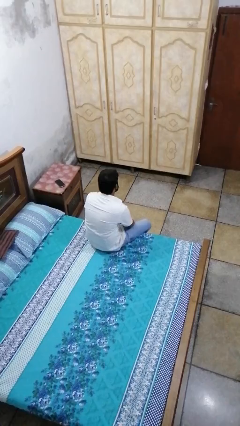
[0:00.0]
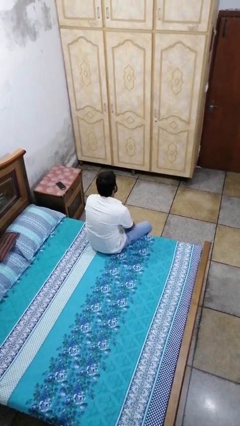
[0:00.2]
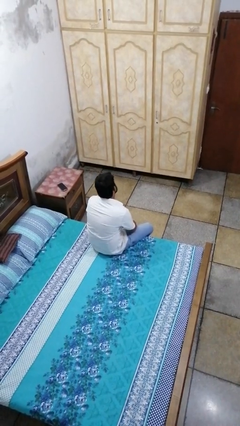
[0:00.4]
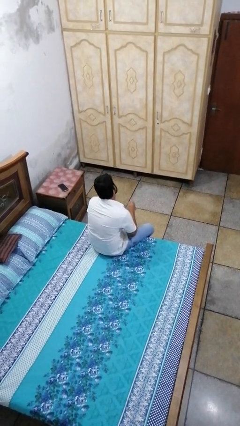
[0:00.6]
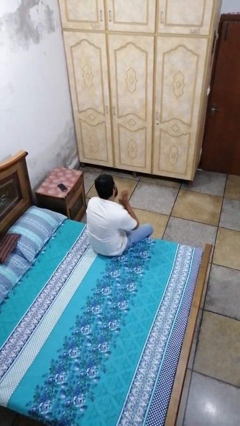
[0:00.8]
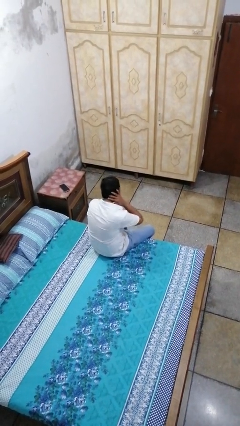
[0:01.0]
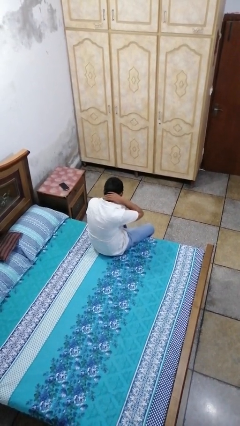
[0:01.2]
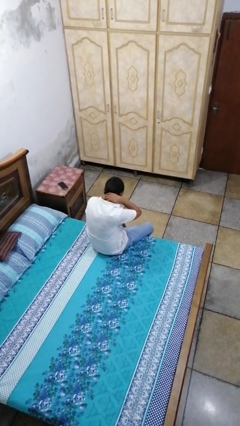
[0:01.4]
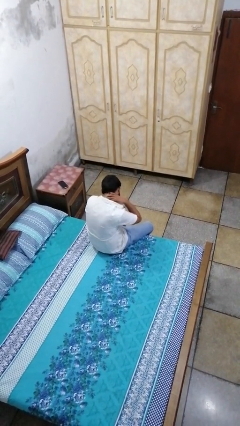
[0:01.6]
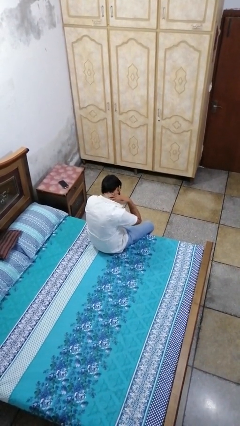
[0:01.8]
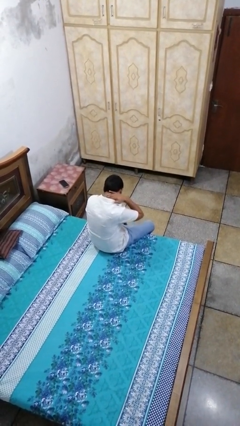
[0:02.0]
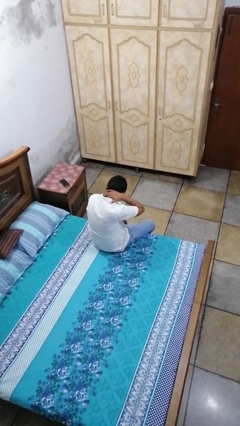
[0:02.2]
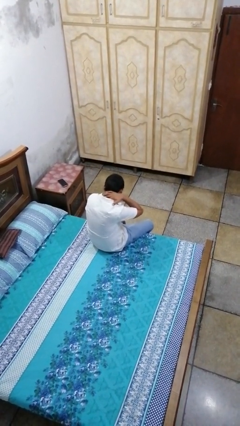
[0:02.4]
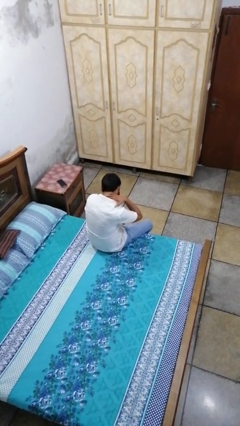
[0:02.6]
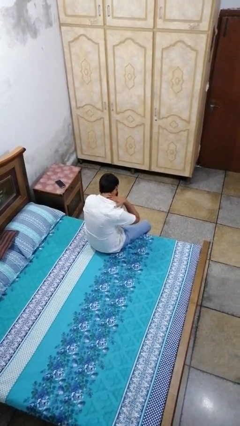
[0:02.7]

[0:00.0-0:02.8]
person rubs neck

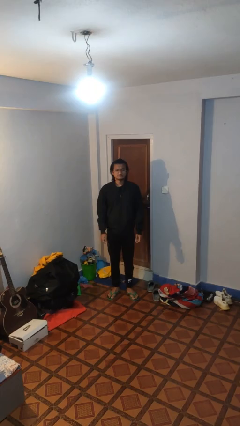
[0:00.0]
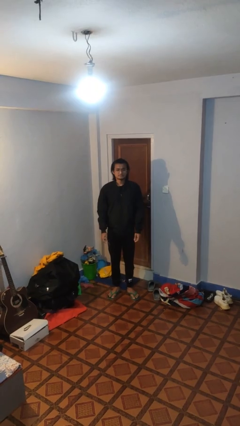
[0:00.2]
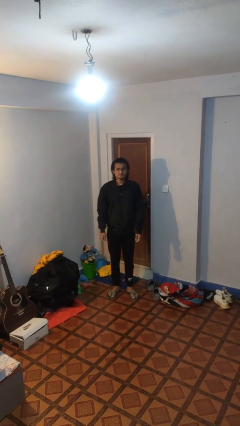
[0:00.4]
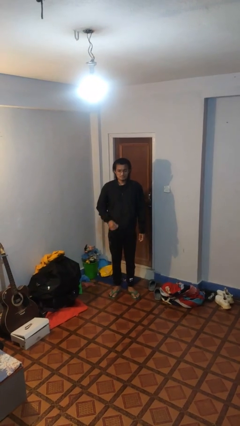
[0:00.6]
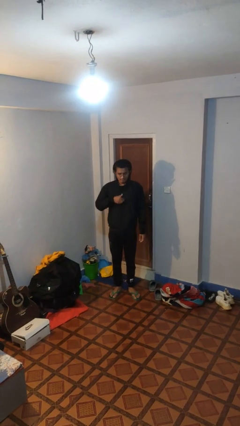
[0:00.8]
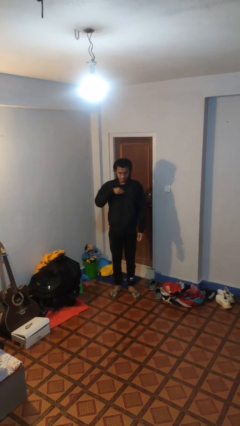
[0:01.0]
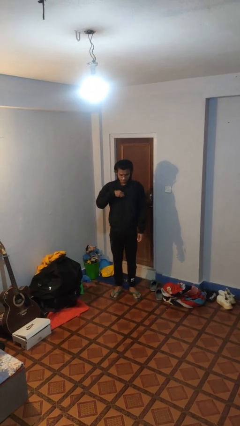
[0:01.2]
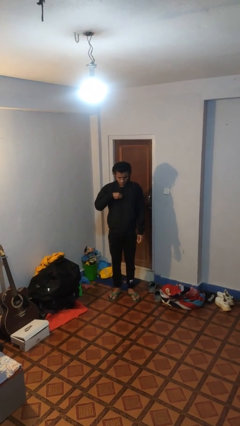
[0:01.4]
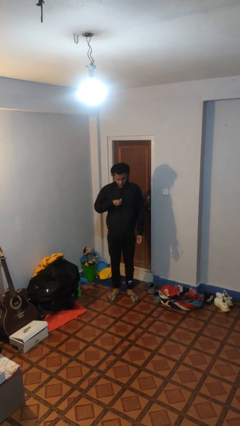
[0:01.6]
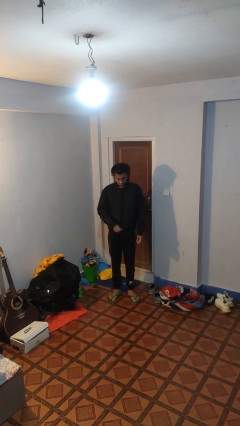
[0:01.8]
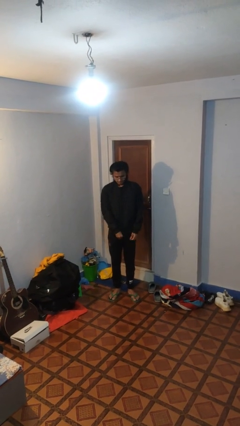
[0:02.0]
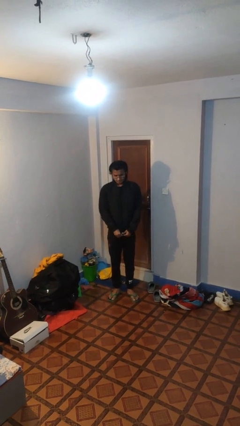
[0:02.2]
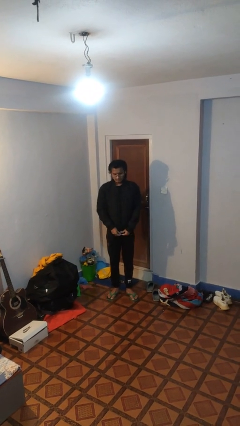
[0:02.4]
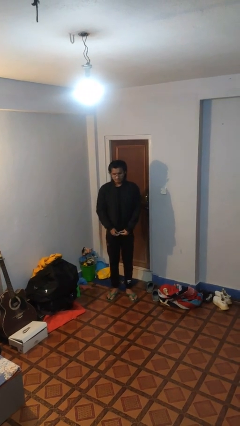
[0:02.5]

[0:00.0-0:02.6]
person unzips jacket

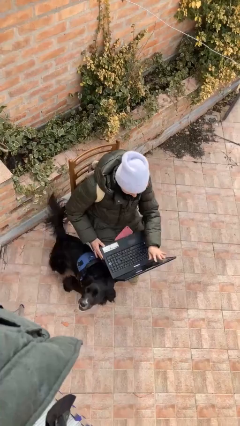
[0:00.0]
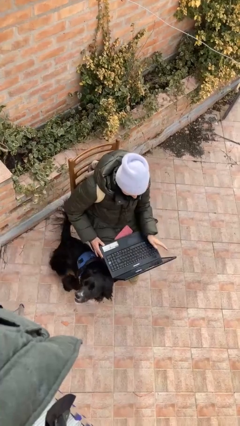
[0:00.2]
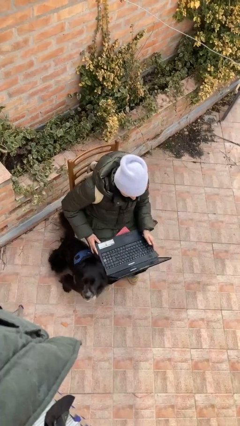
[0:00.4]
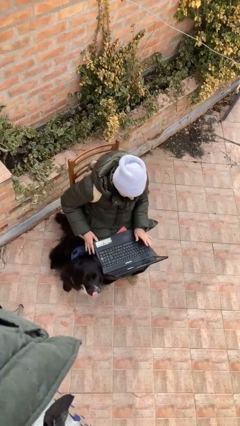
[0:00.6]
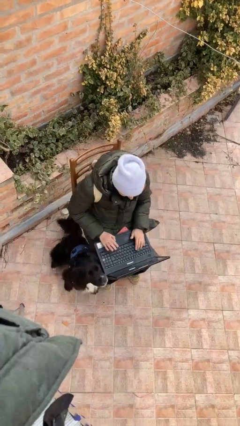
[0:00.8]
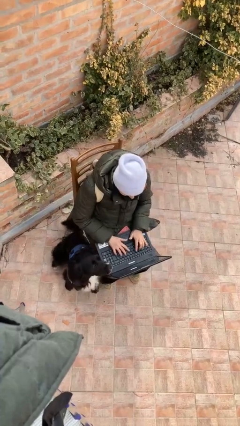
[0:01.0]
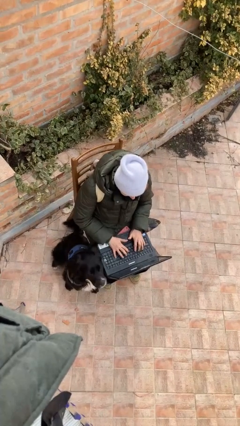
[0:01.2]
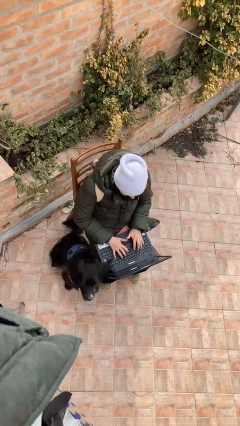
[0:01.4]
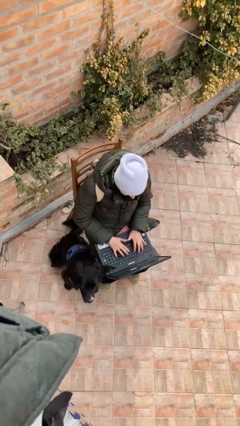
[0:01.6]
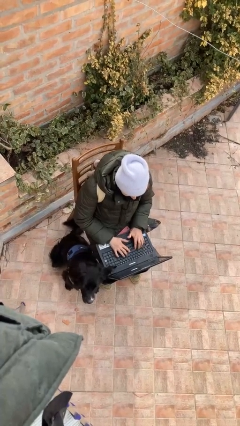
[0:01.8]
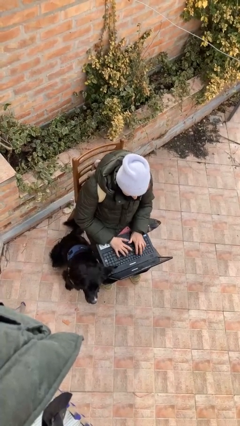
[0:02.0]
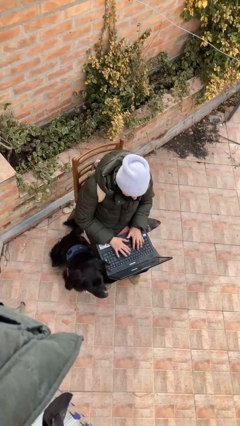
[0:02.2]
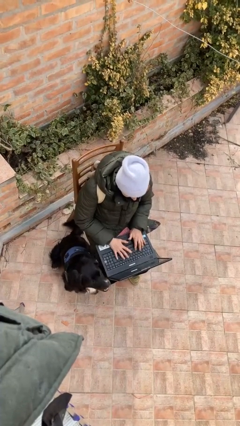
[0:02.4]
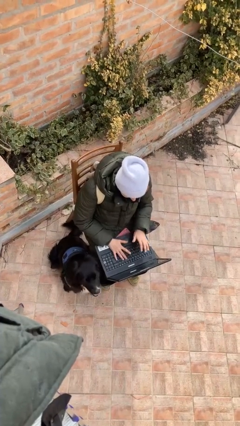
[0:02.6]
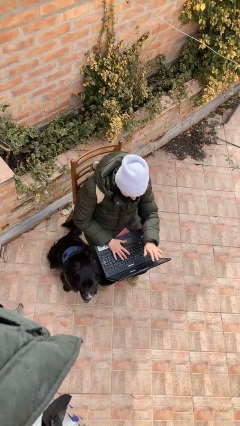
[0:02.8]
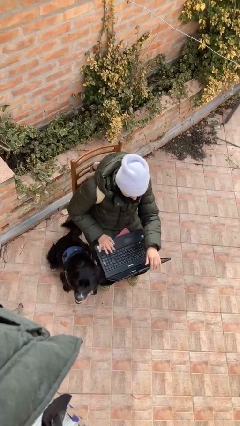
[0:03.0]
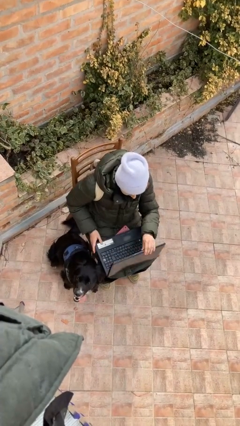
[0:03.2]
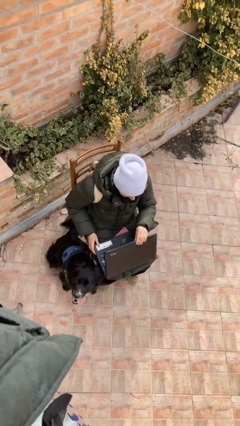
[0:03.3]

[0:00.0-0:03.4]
person interacts with laptop

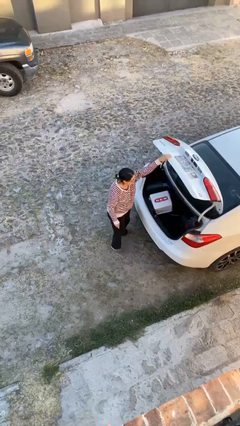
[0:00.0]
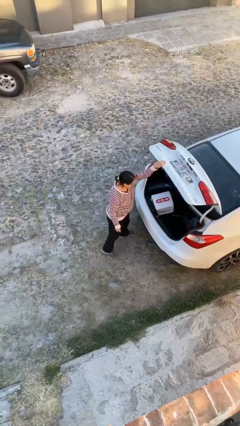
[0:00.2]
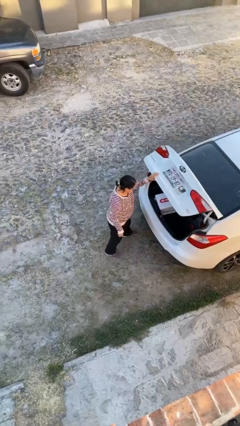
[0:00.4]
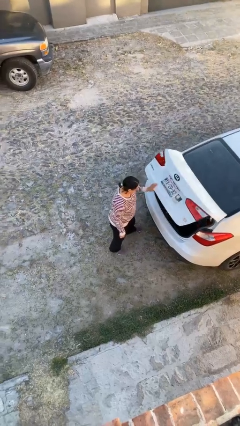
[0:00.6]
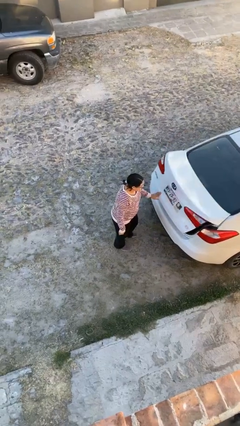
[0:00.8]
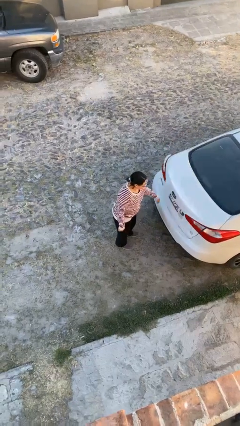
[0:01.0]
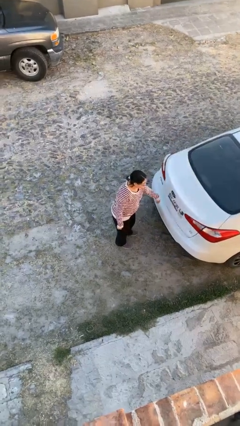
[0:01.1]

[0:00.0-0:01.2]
person closes car trunk

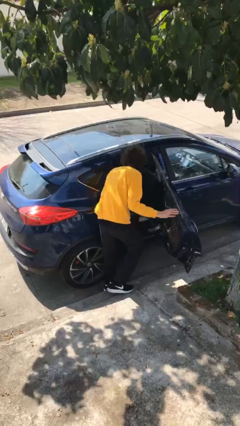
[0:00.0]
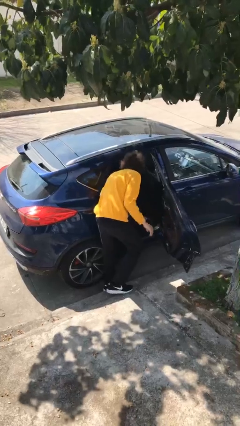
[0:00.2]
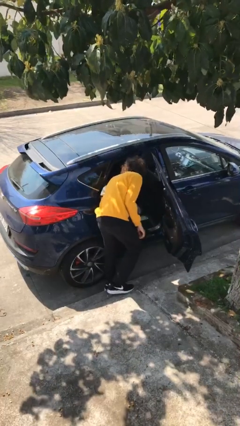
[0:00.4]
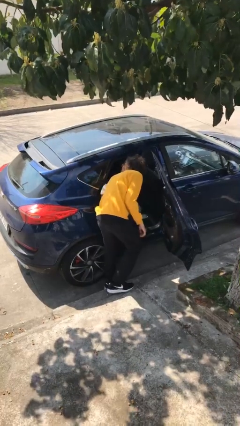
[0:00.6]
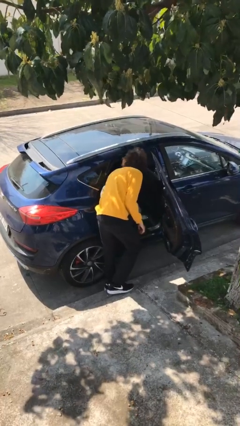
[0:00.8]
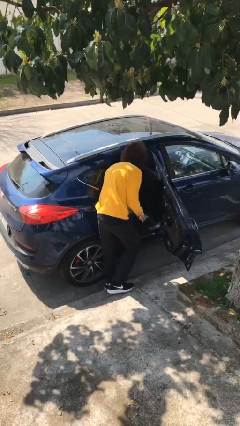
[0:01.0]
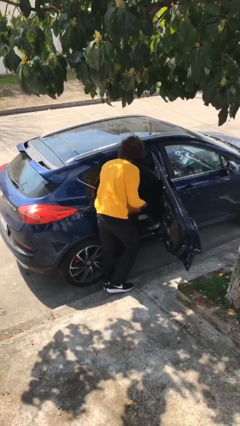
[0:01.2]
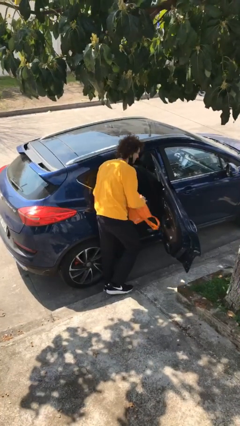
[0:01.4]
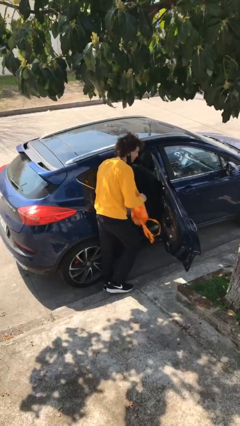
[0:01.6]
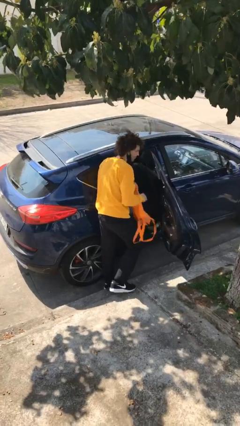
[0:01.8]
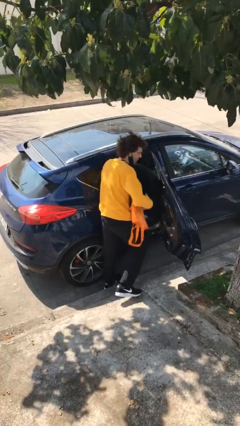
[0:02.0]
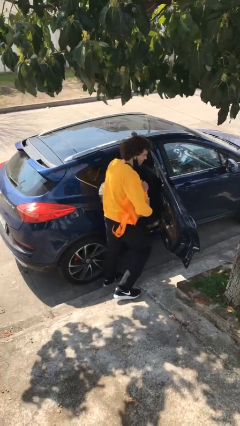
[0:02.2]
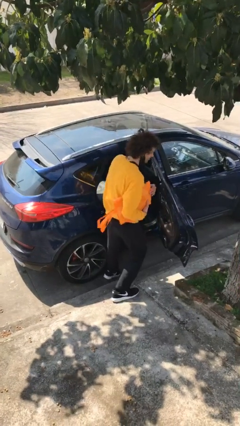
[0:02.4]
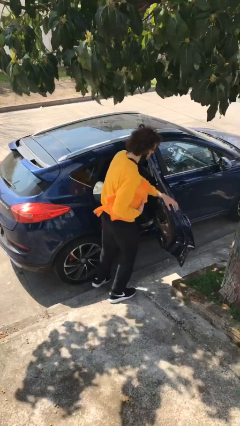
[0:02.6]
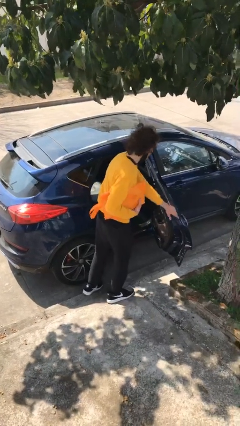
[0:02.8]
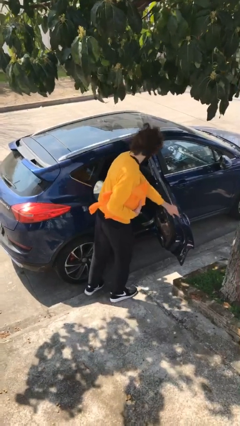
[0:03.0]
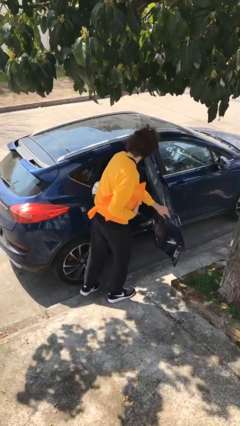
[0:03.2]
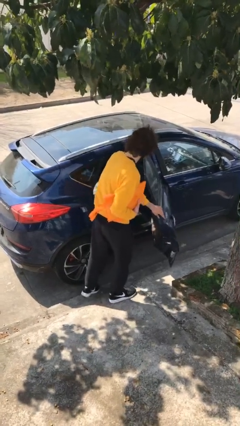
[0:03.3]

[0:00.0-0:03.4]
person unloads car

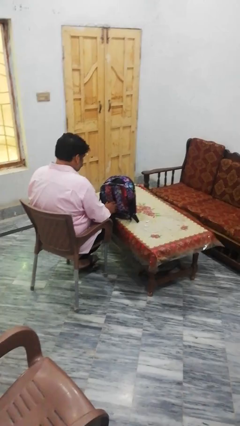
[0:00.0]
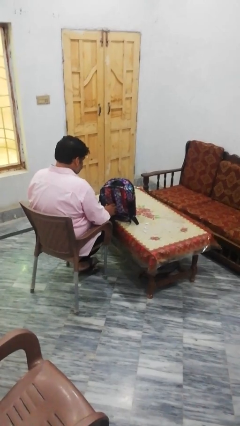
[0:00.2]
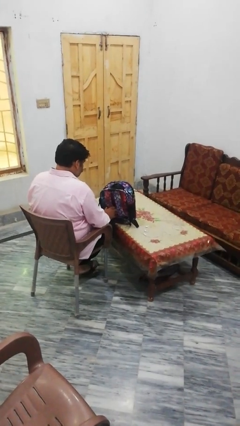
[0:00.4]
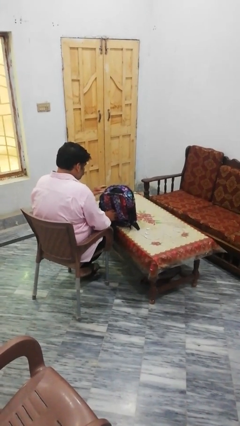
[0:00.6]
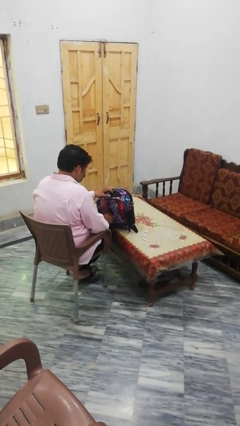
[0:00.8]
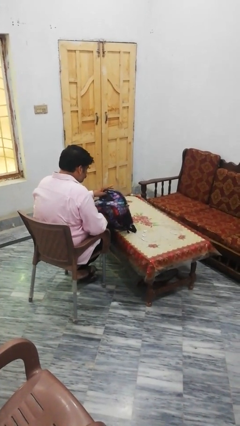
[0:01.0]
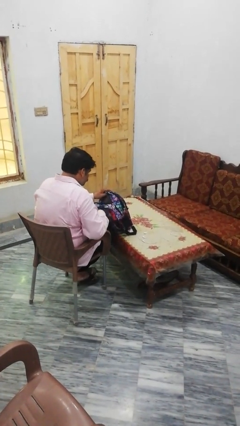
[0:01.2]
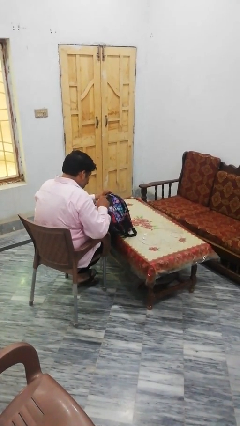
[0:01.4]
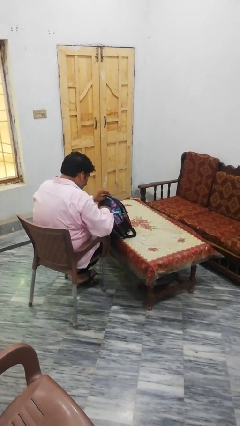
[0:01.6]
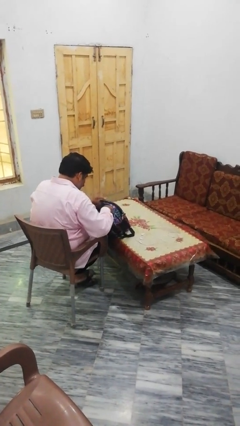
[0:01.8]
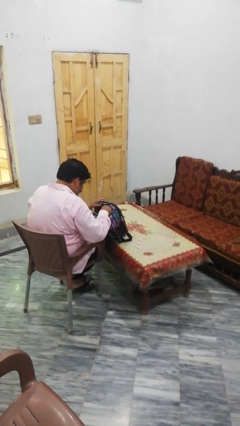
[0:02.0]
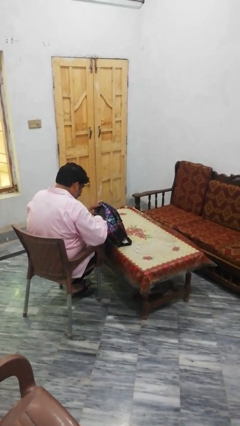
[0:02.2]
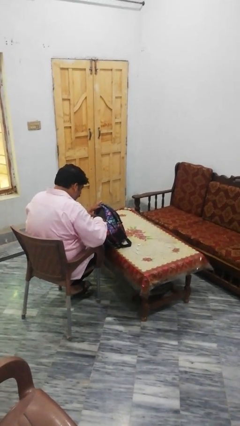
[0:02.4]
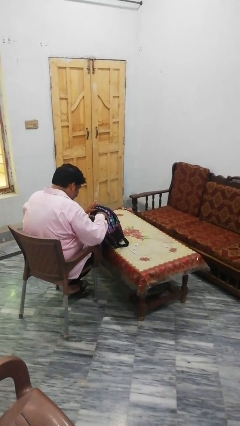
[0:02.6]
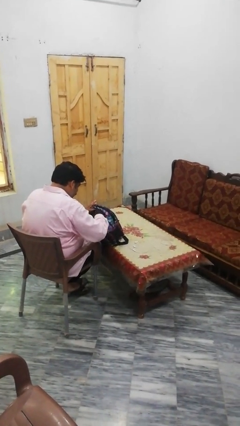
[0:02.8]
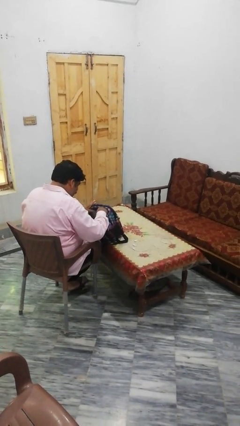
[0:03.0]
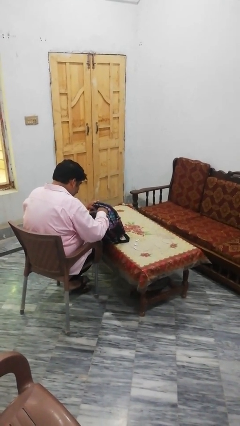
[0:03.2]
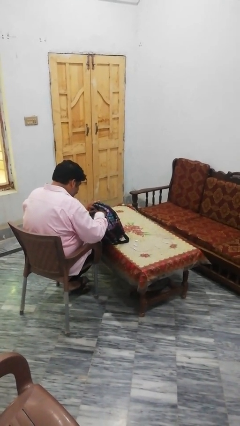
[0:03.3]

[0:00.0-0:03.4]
person searches in backpack

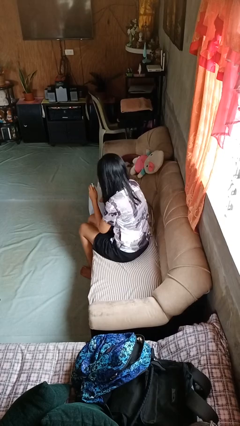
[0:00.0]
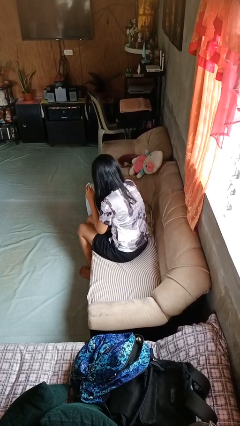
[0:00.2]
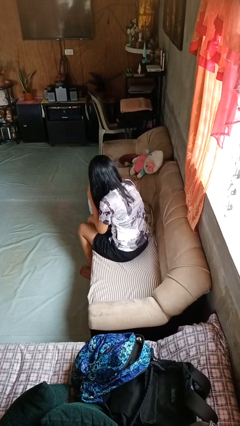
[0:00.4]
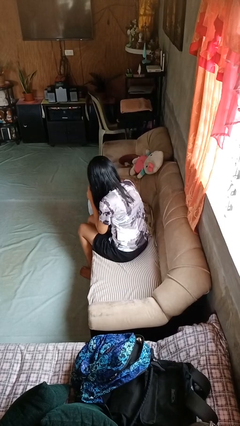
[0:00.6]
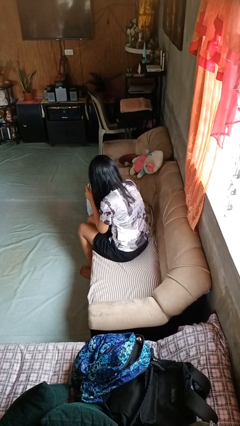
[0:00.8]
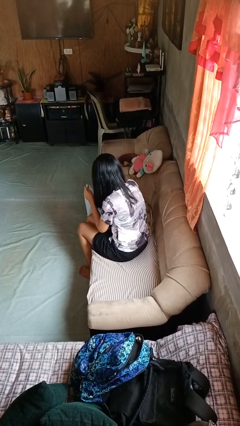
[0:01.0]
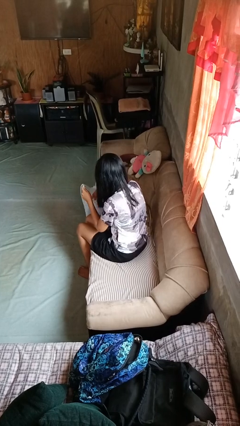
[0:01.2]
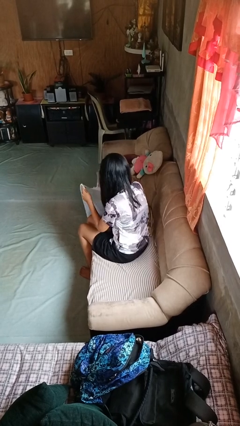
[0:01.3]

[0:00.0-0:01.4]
person searches in bag
